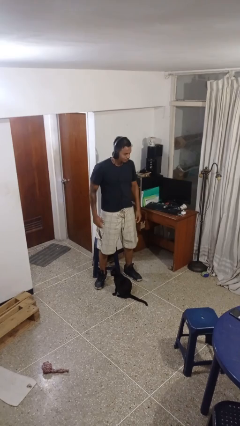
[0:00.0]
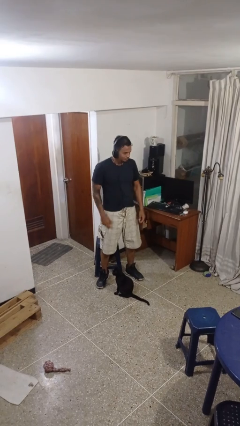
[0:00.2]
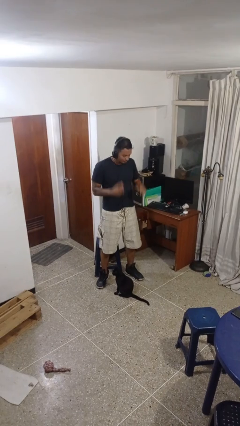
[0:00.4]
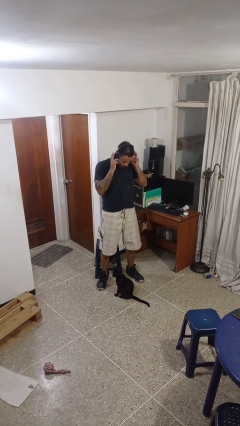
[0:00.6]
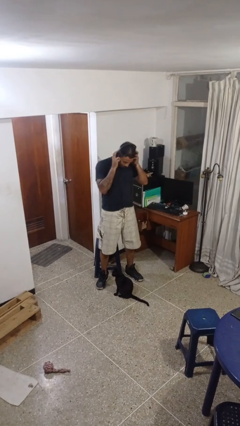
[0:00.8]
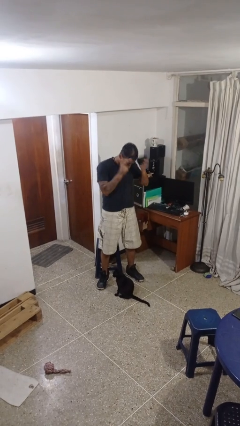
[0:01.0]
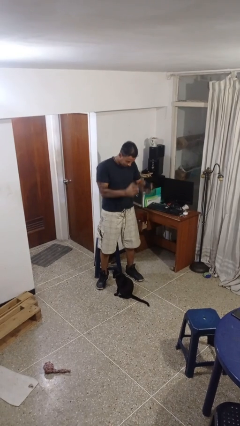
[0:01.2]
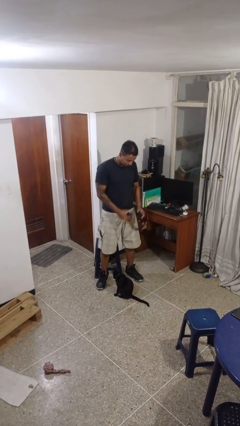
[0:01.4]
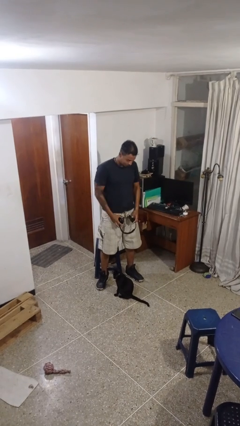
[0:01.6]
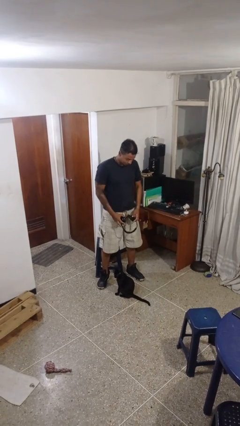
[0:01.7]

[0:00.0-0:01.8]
person takes off headphones

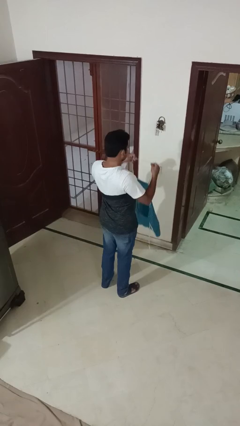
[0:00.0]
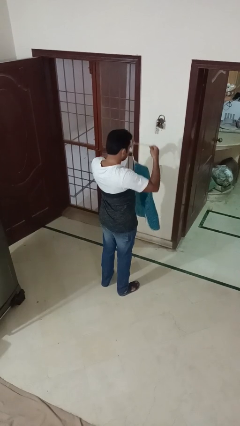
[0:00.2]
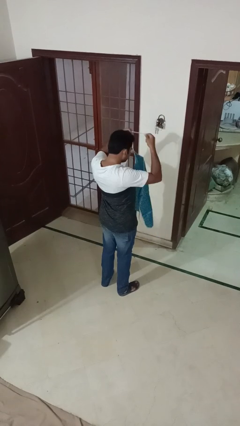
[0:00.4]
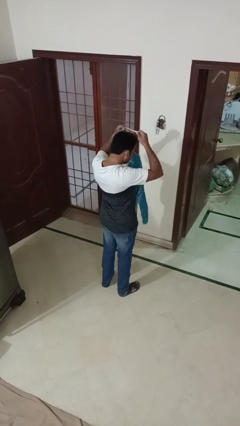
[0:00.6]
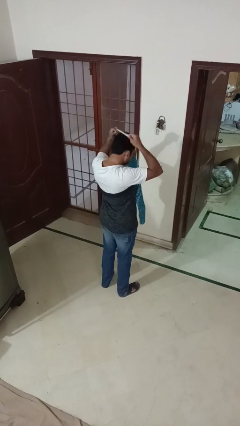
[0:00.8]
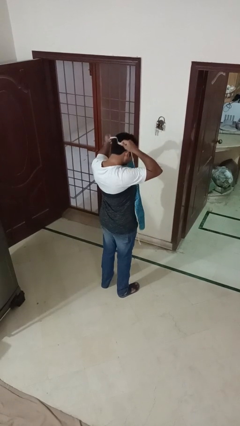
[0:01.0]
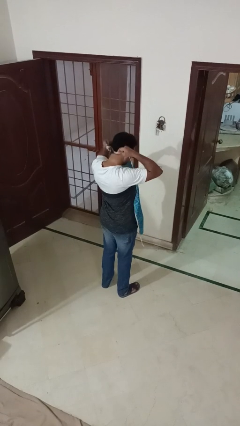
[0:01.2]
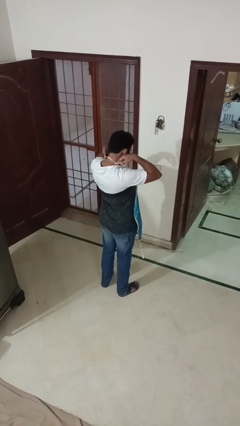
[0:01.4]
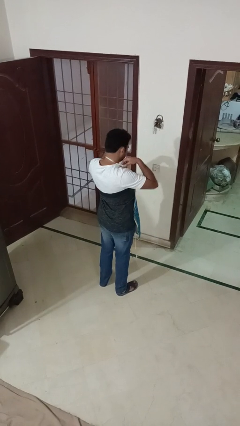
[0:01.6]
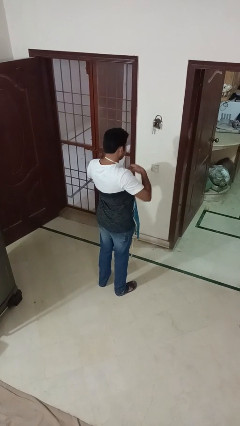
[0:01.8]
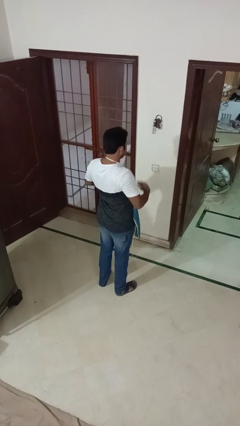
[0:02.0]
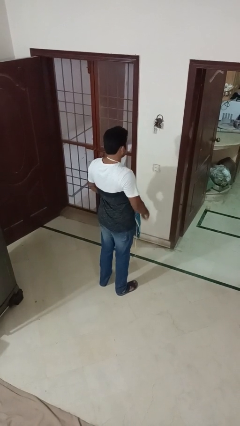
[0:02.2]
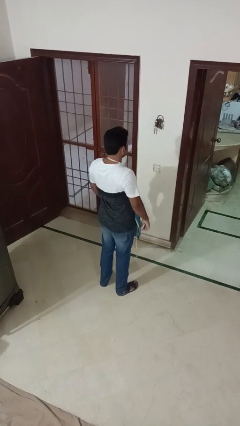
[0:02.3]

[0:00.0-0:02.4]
person puts on apron

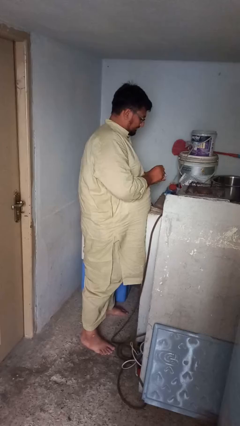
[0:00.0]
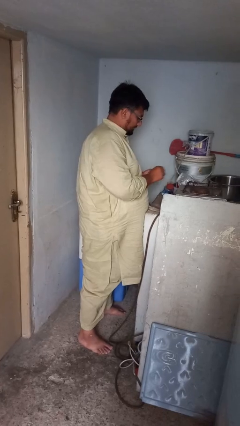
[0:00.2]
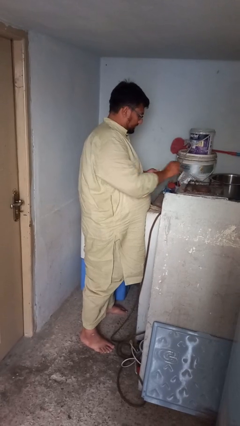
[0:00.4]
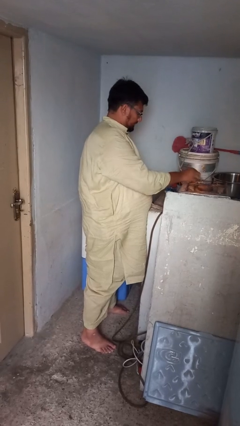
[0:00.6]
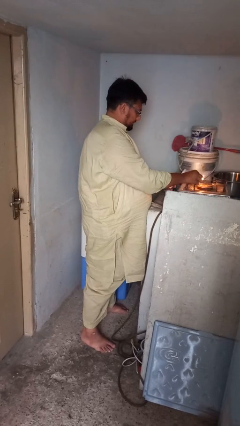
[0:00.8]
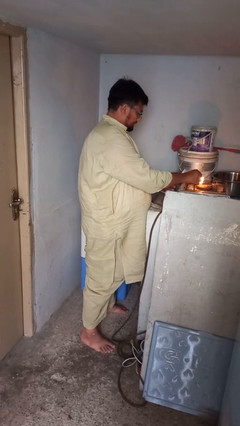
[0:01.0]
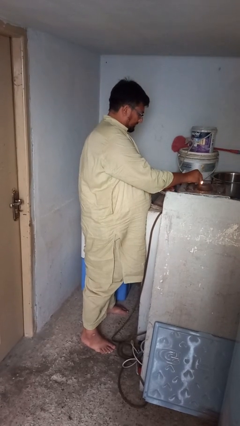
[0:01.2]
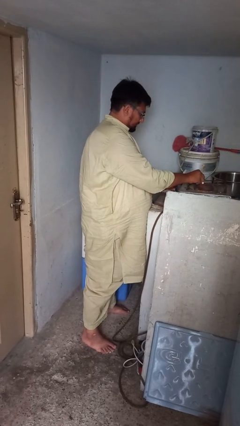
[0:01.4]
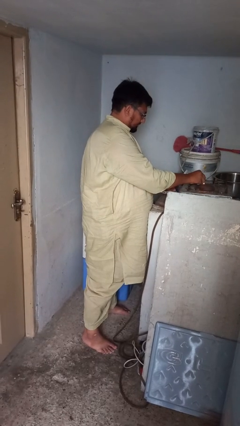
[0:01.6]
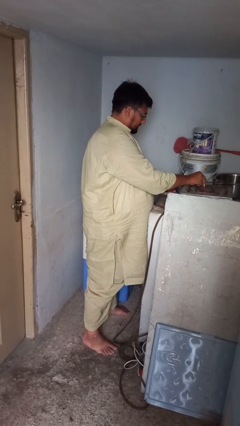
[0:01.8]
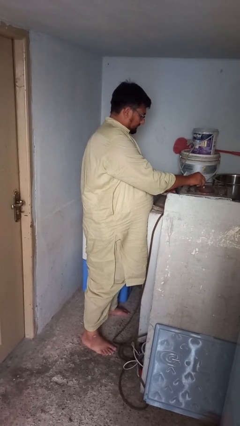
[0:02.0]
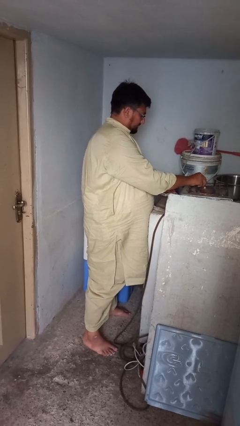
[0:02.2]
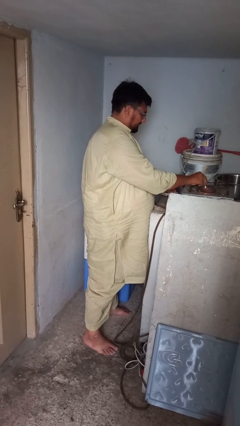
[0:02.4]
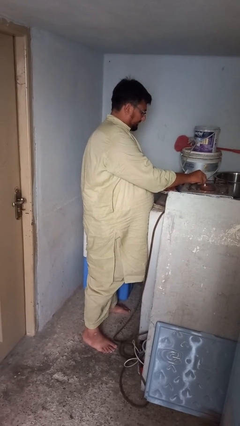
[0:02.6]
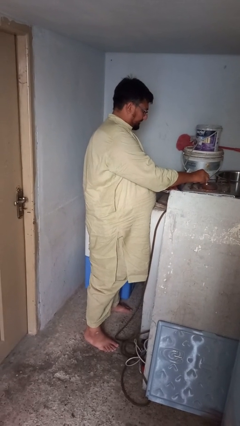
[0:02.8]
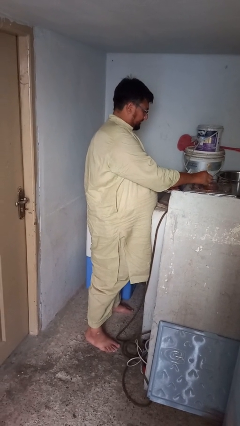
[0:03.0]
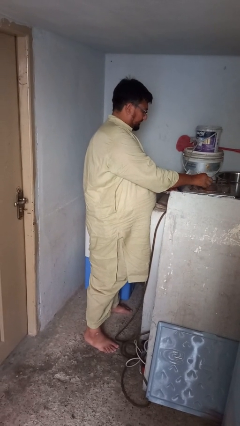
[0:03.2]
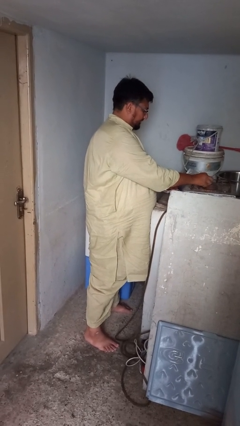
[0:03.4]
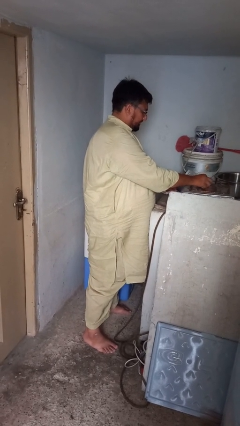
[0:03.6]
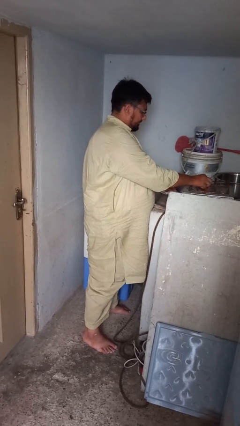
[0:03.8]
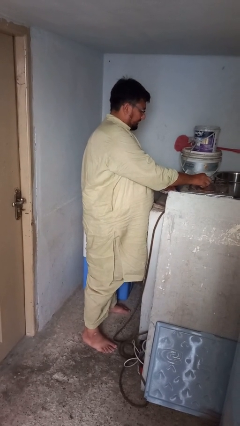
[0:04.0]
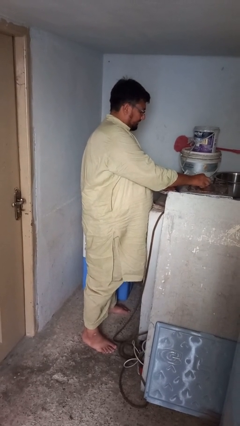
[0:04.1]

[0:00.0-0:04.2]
person turns on stovetop

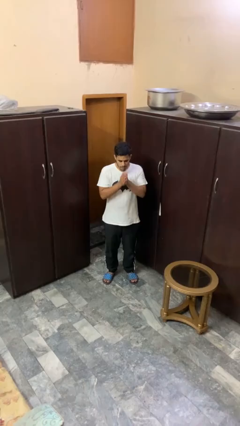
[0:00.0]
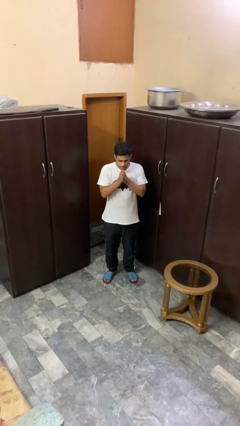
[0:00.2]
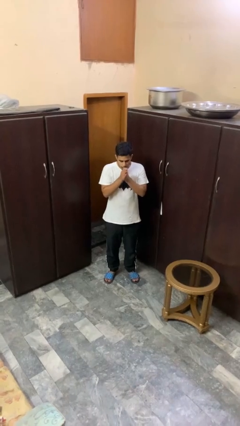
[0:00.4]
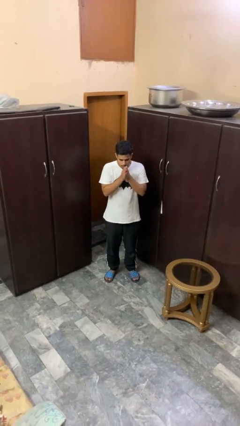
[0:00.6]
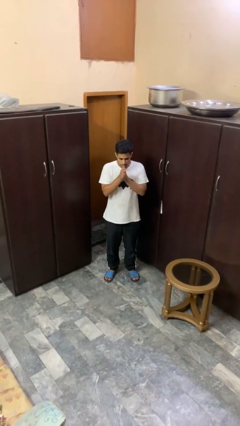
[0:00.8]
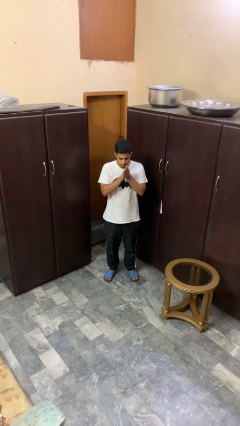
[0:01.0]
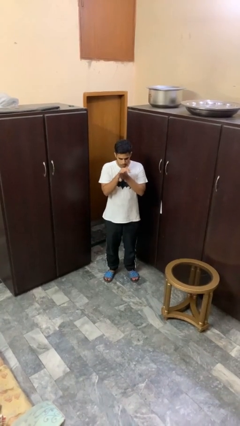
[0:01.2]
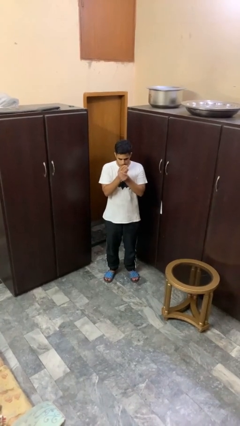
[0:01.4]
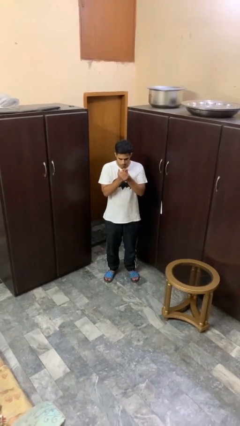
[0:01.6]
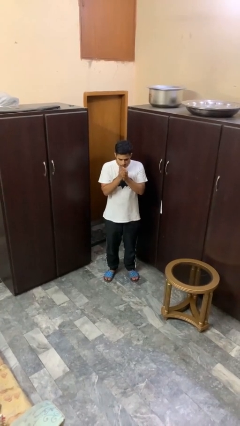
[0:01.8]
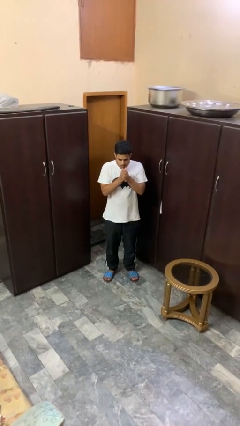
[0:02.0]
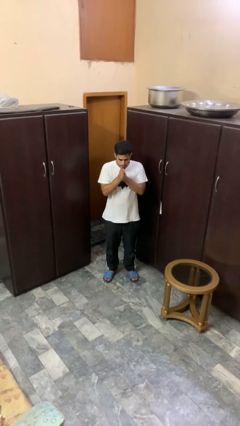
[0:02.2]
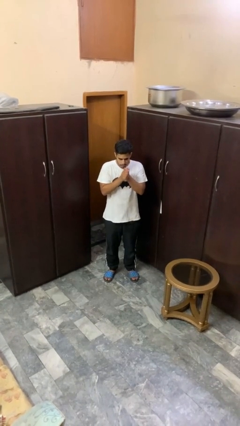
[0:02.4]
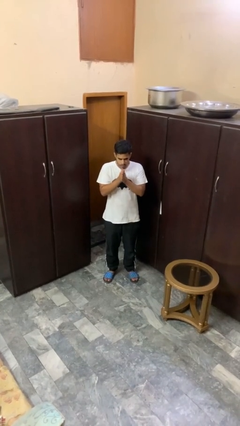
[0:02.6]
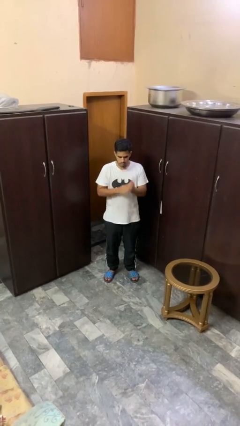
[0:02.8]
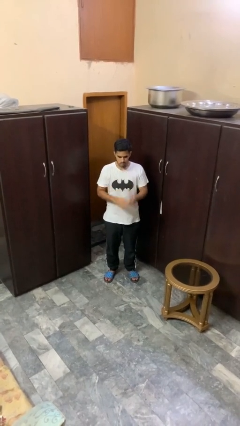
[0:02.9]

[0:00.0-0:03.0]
person blows into hands

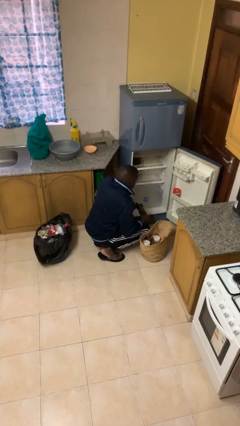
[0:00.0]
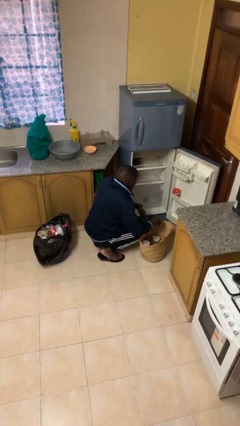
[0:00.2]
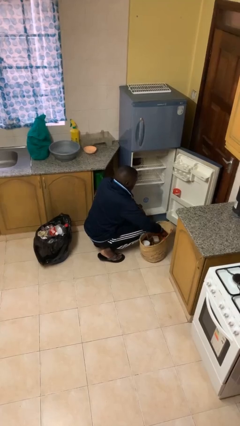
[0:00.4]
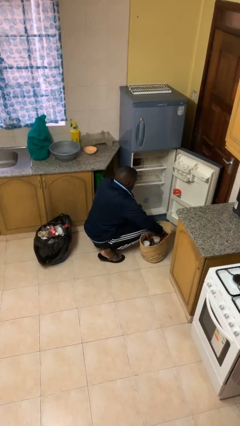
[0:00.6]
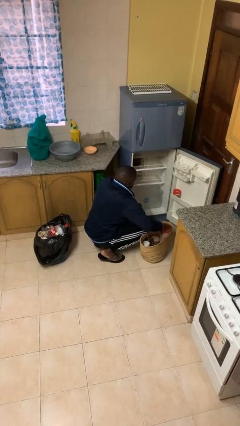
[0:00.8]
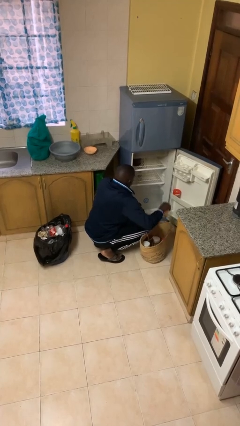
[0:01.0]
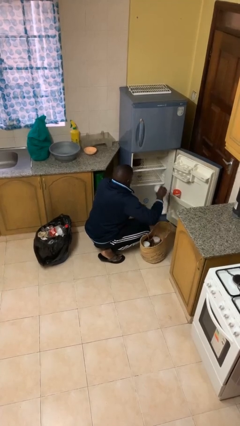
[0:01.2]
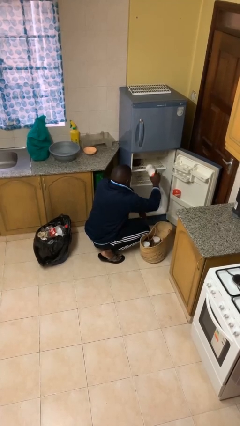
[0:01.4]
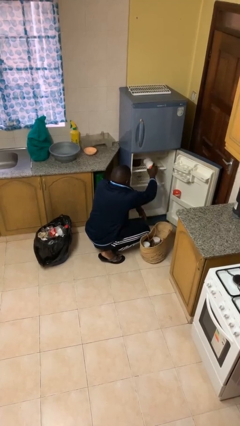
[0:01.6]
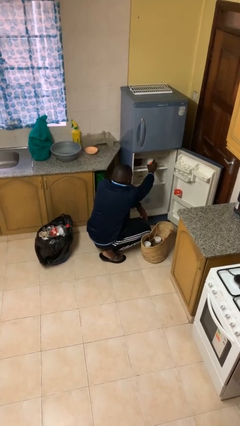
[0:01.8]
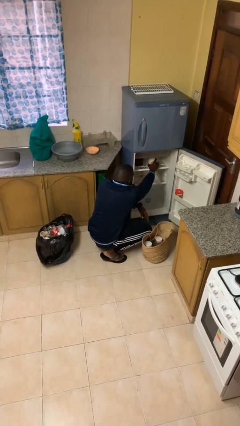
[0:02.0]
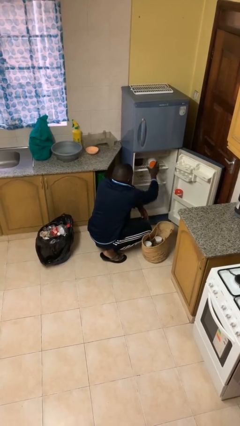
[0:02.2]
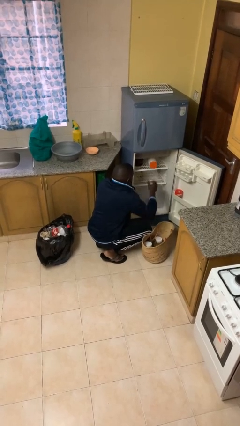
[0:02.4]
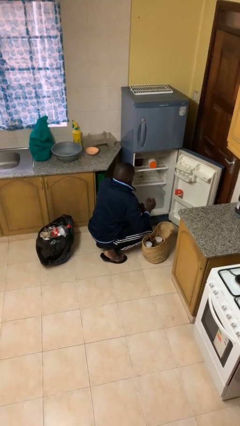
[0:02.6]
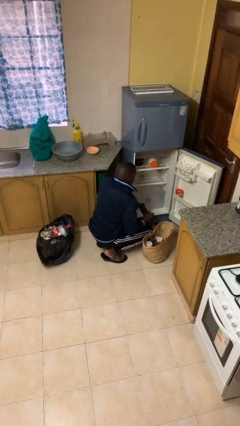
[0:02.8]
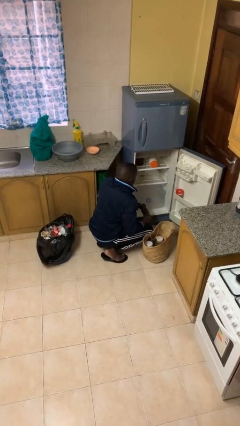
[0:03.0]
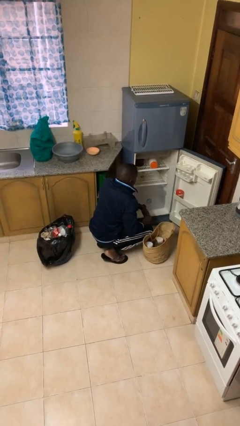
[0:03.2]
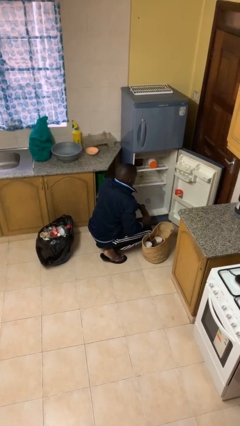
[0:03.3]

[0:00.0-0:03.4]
person loads groceries into refrigerator

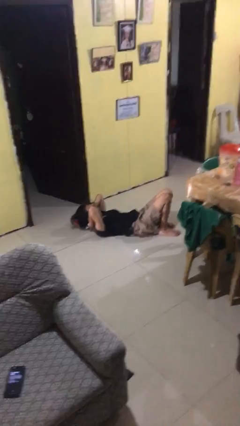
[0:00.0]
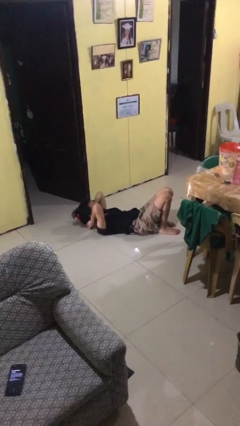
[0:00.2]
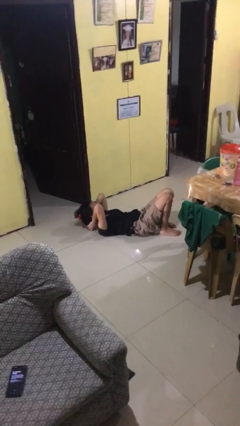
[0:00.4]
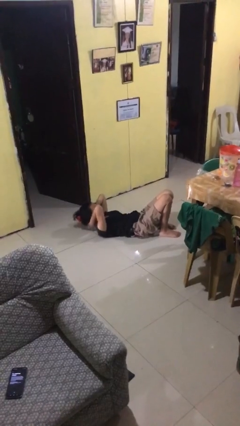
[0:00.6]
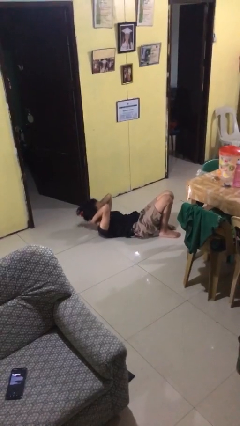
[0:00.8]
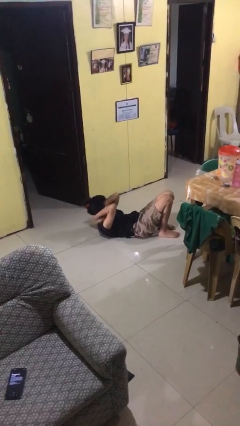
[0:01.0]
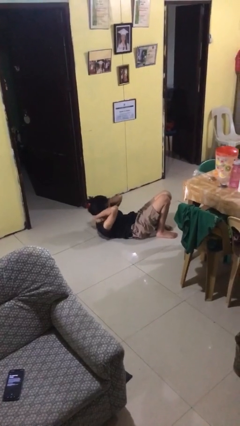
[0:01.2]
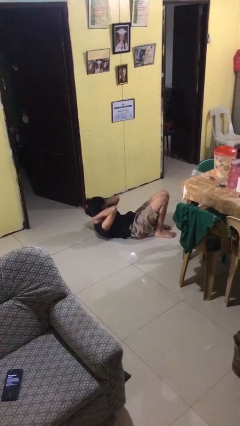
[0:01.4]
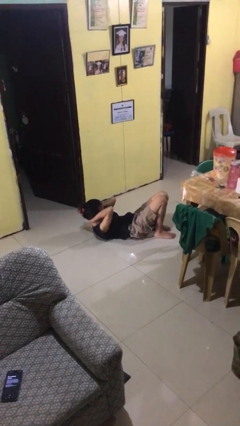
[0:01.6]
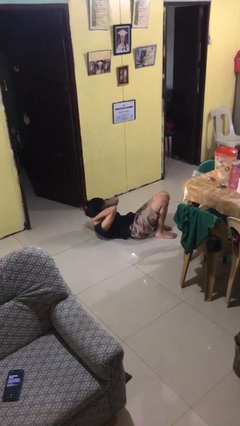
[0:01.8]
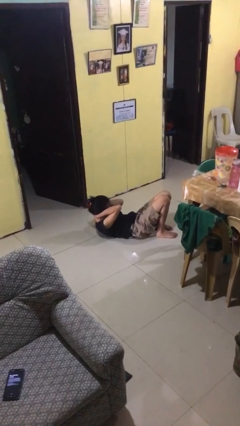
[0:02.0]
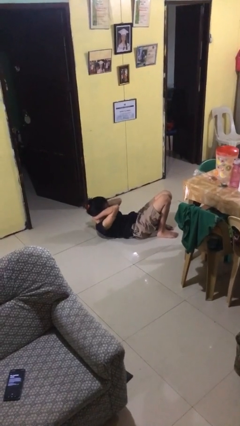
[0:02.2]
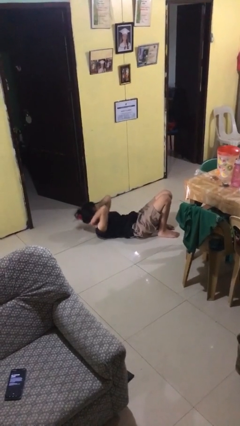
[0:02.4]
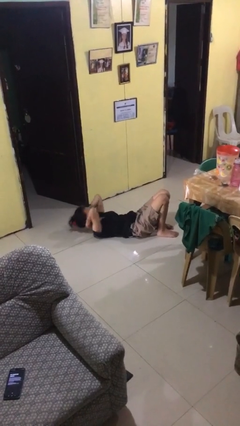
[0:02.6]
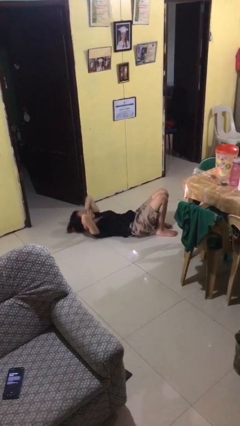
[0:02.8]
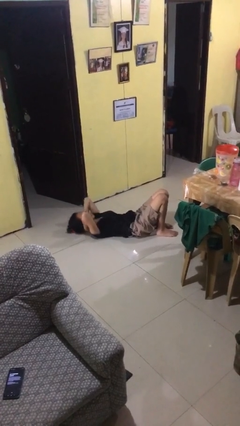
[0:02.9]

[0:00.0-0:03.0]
person exercises with situp
